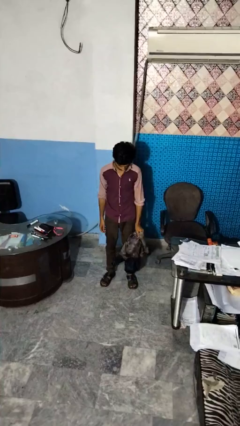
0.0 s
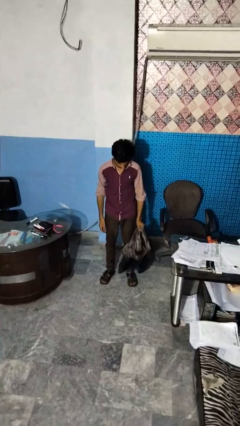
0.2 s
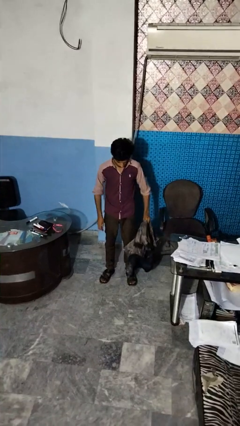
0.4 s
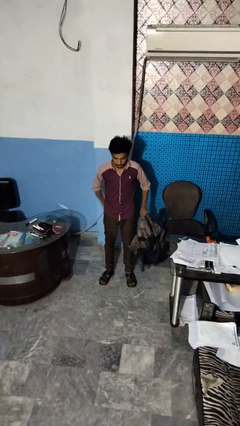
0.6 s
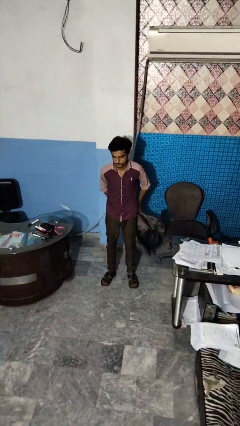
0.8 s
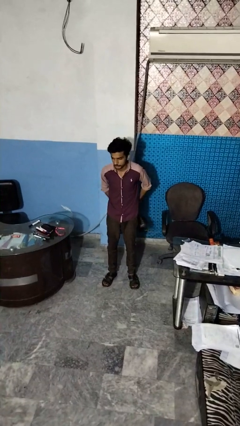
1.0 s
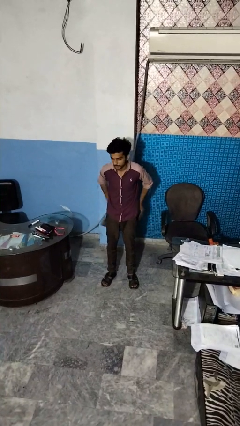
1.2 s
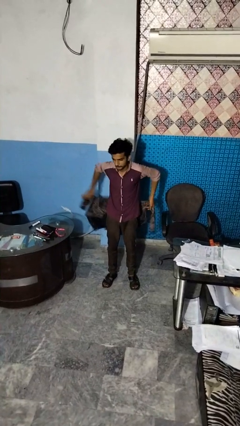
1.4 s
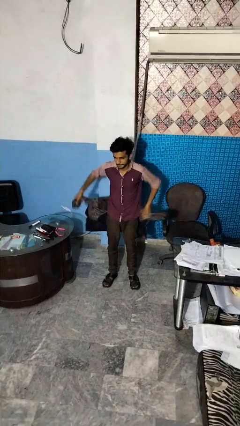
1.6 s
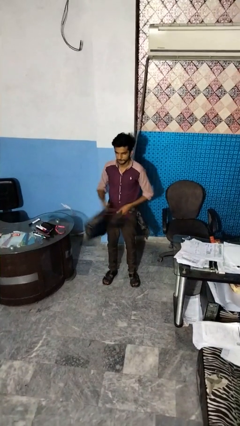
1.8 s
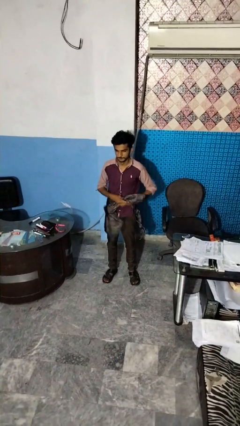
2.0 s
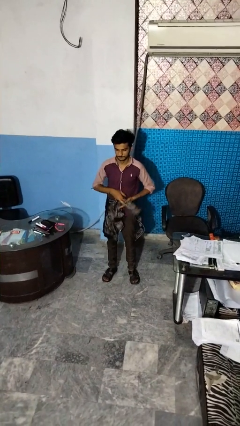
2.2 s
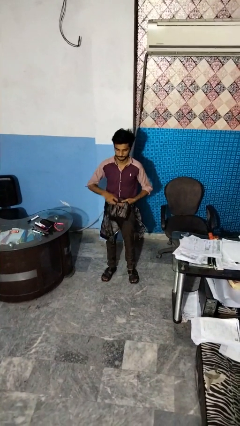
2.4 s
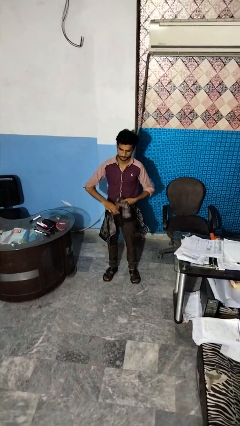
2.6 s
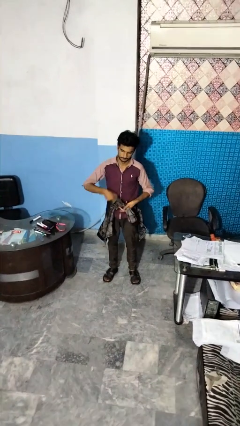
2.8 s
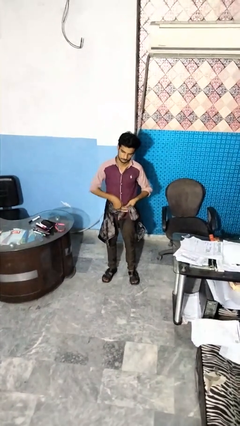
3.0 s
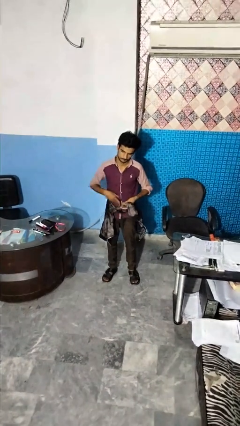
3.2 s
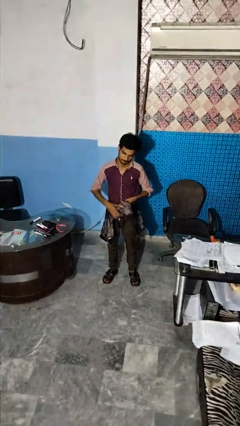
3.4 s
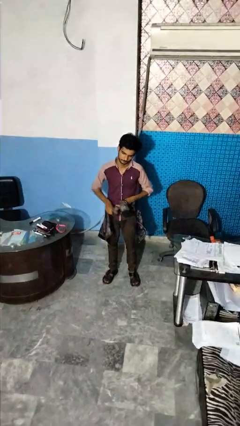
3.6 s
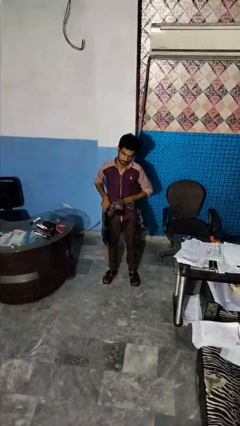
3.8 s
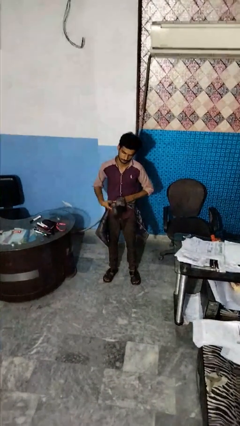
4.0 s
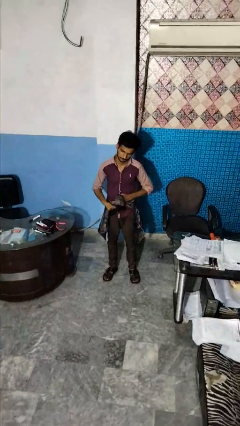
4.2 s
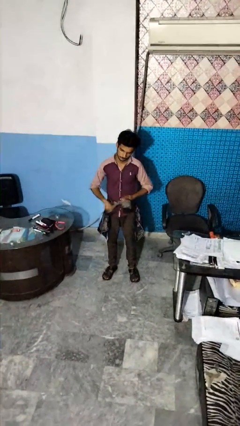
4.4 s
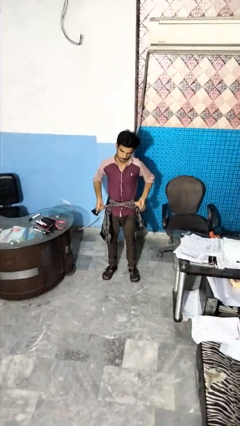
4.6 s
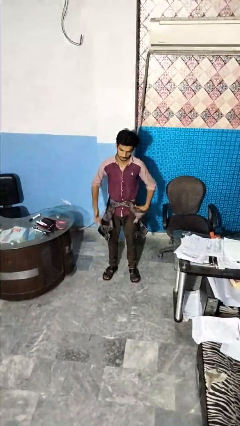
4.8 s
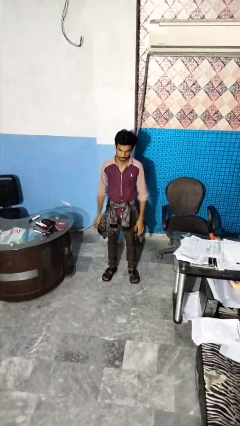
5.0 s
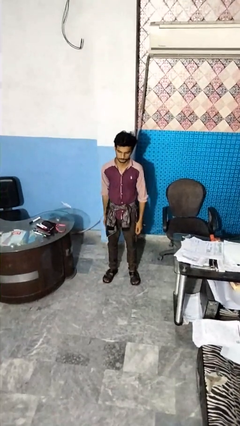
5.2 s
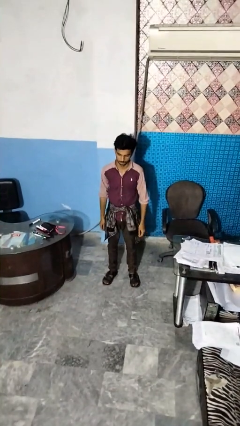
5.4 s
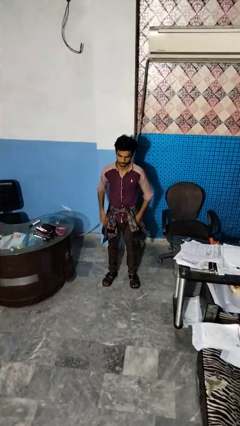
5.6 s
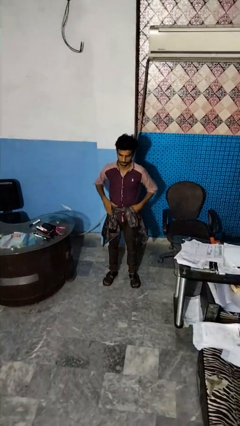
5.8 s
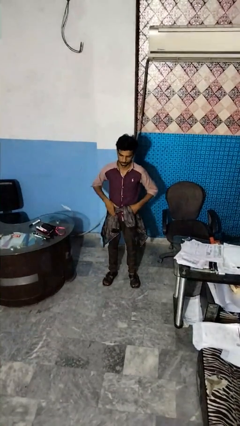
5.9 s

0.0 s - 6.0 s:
person ties jacket around waist

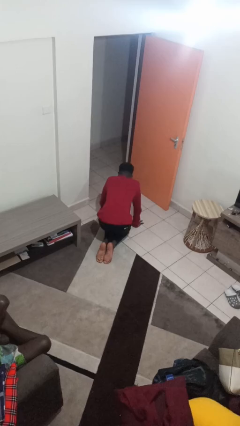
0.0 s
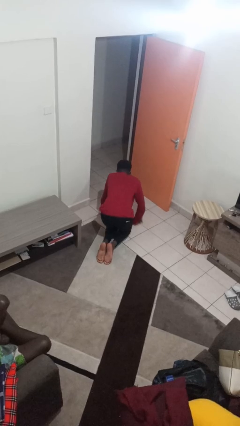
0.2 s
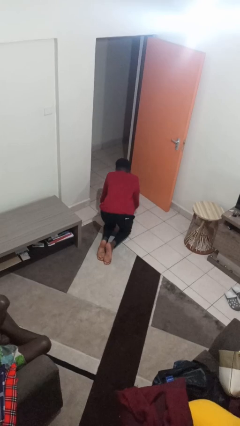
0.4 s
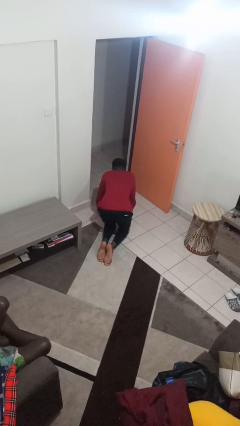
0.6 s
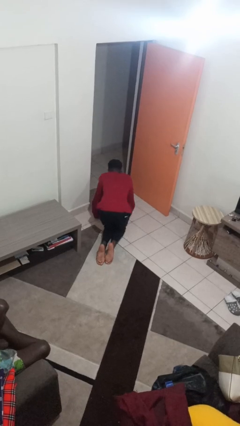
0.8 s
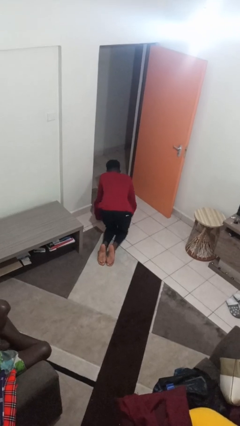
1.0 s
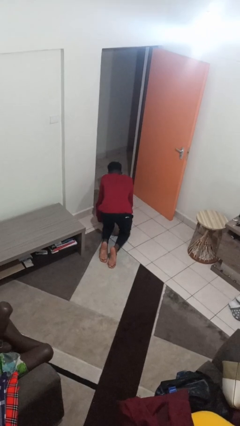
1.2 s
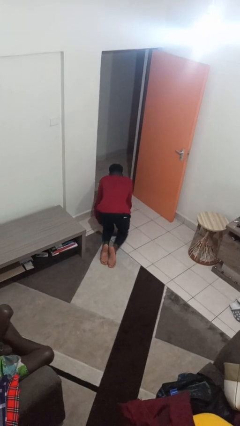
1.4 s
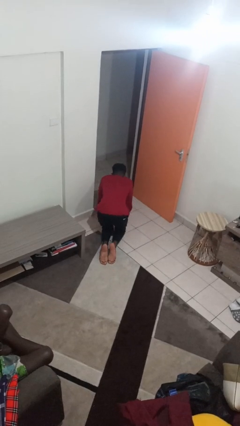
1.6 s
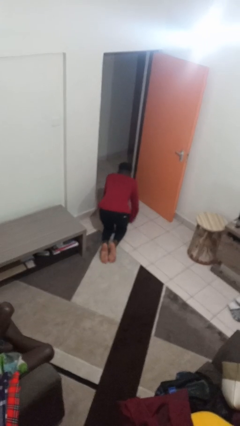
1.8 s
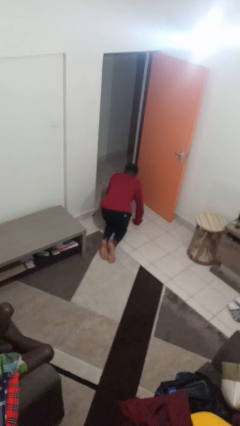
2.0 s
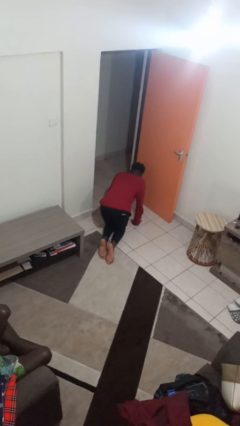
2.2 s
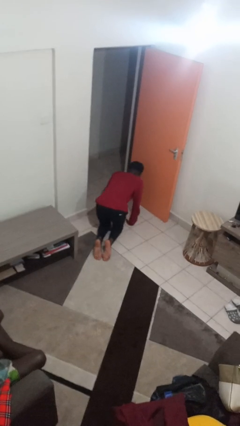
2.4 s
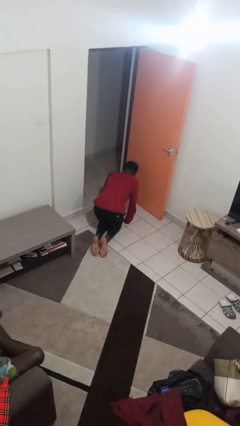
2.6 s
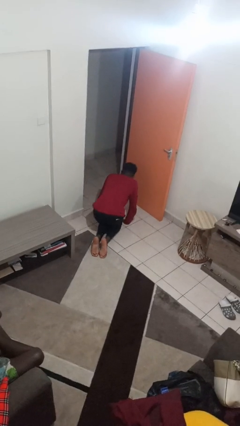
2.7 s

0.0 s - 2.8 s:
person crawls

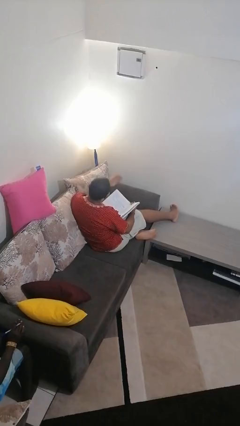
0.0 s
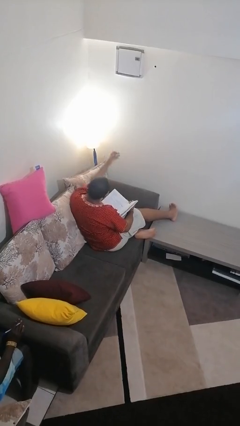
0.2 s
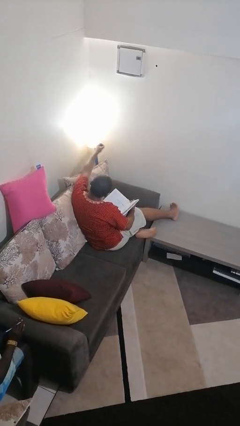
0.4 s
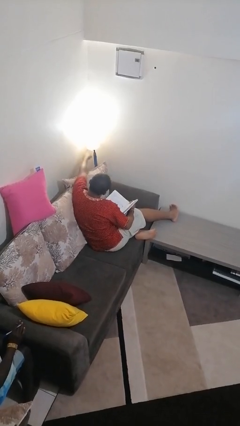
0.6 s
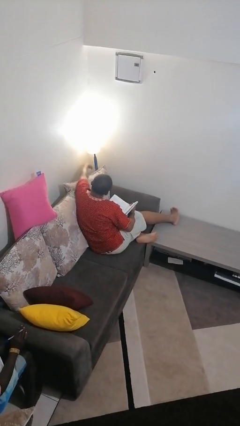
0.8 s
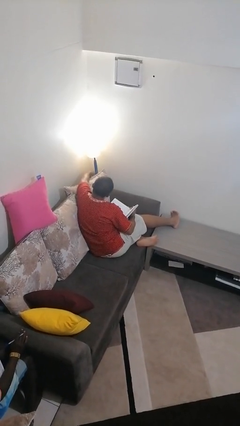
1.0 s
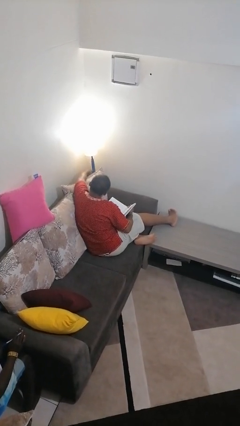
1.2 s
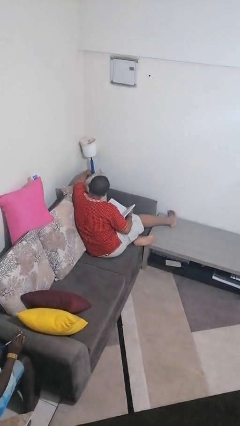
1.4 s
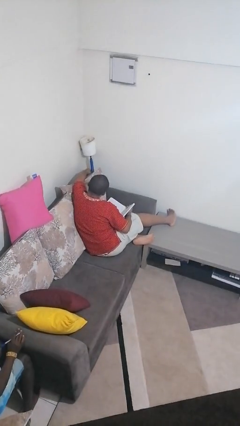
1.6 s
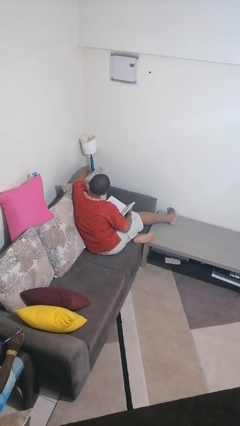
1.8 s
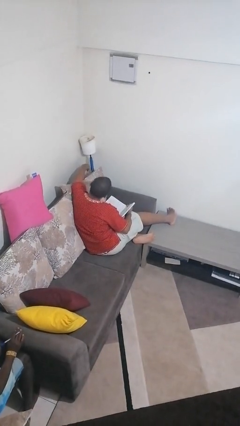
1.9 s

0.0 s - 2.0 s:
person turns off lamp

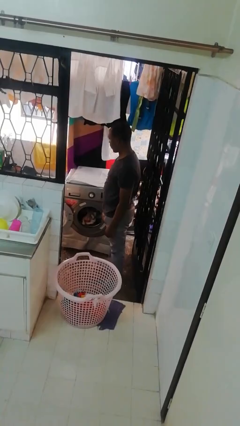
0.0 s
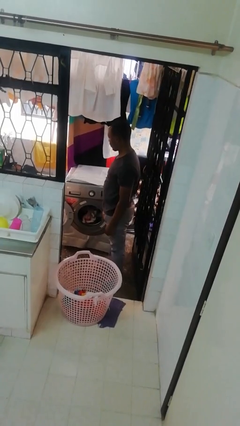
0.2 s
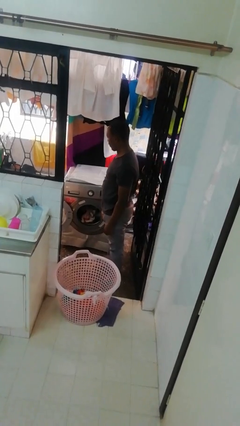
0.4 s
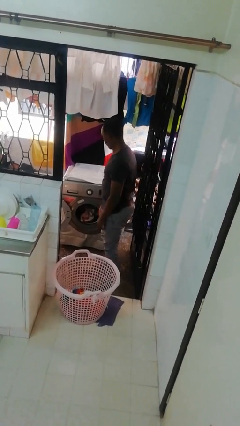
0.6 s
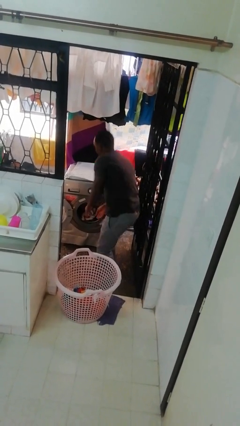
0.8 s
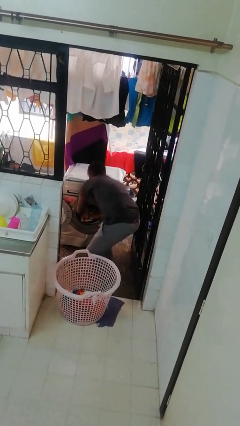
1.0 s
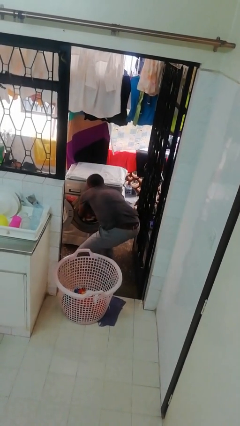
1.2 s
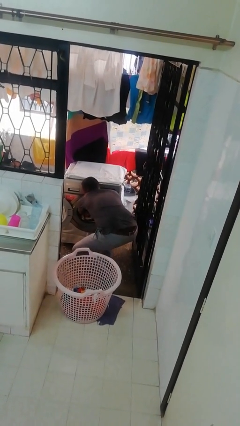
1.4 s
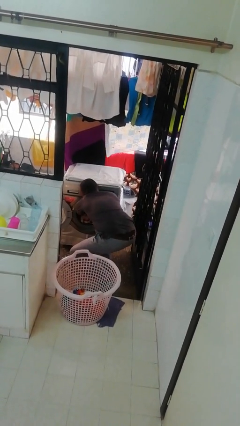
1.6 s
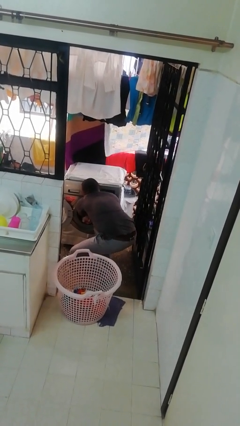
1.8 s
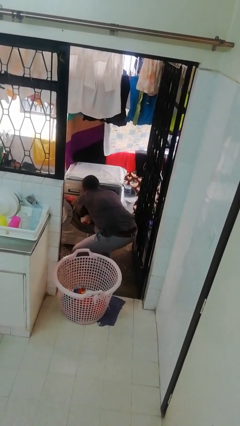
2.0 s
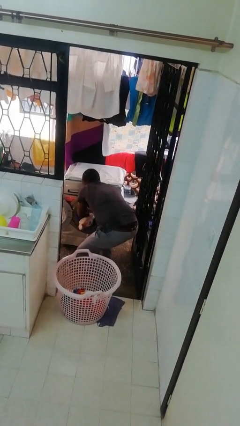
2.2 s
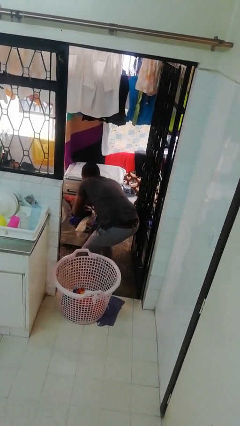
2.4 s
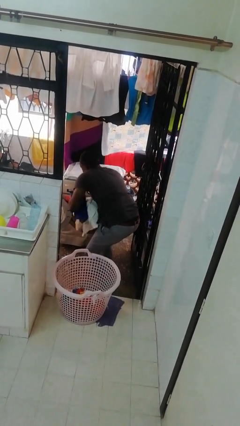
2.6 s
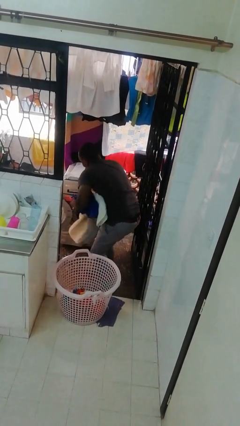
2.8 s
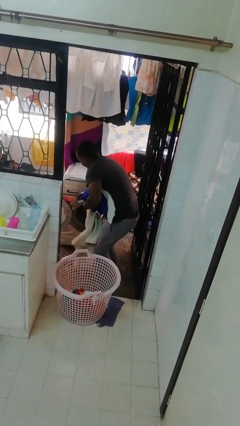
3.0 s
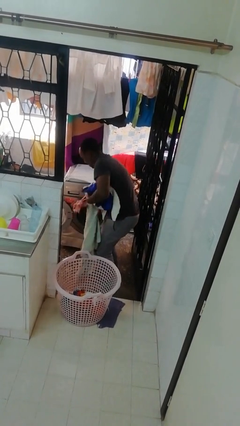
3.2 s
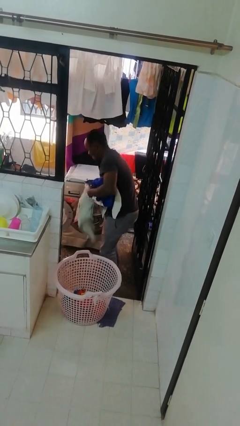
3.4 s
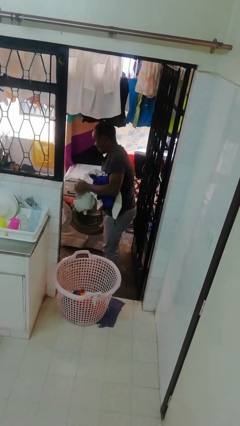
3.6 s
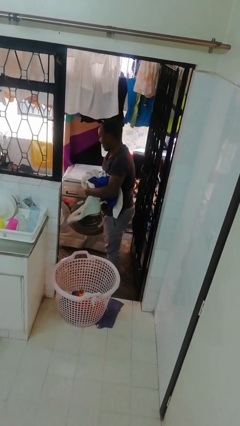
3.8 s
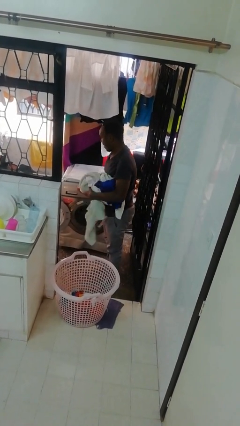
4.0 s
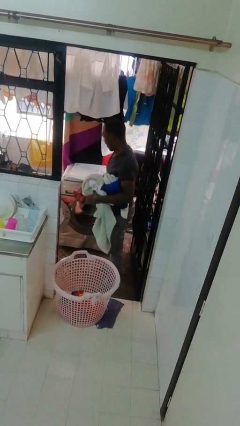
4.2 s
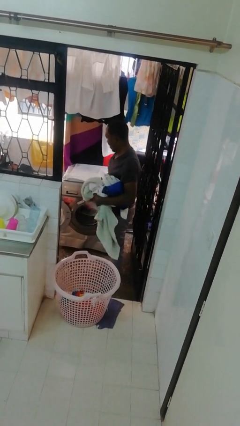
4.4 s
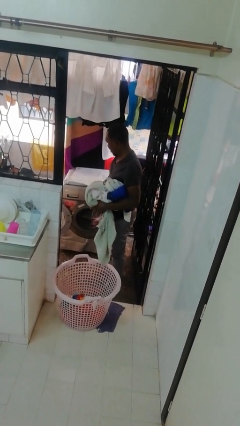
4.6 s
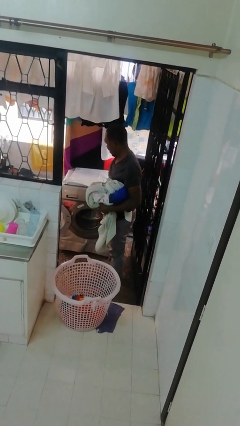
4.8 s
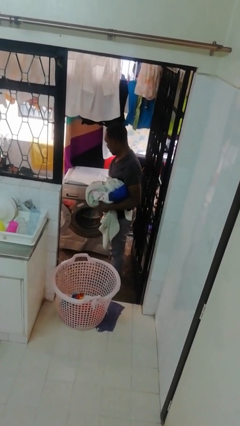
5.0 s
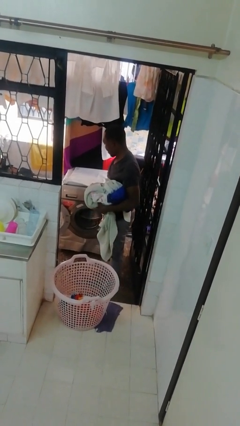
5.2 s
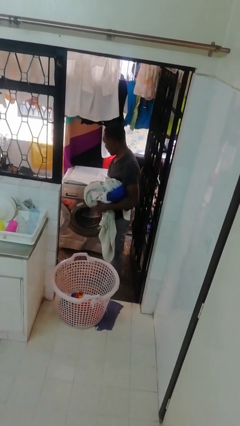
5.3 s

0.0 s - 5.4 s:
person unloads clotheswasher

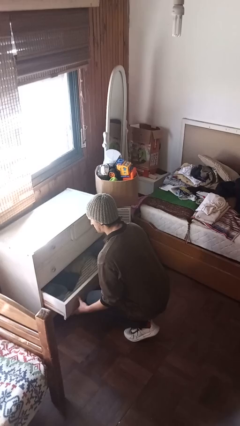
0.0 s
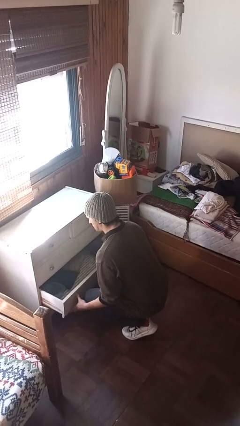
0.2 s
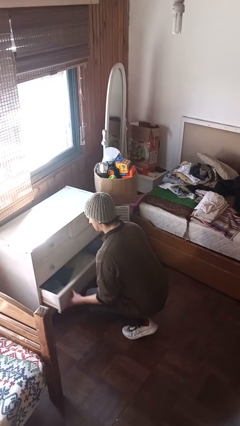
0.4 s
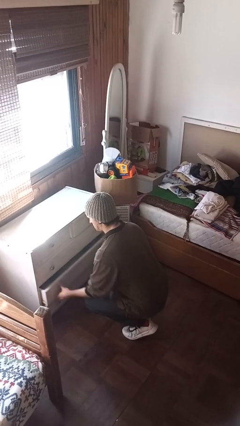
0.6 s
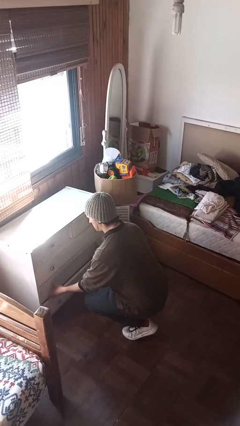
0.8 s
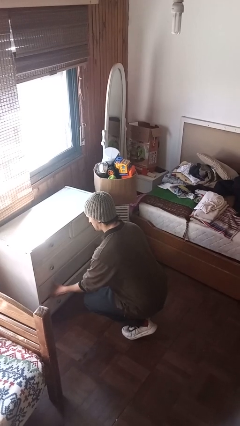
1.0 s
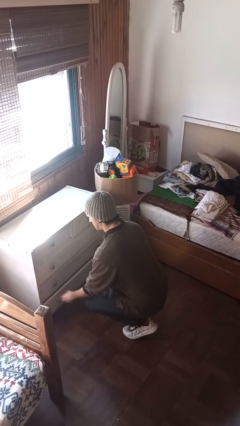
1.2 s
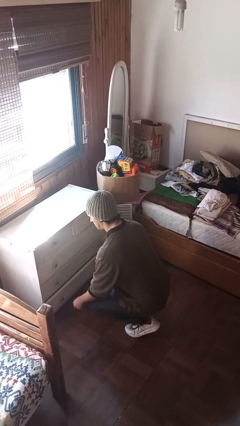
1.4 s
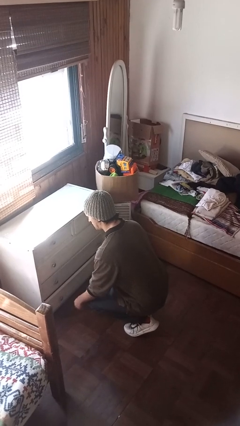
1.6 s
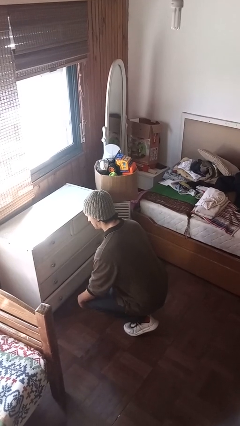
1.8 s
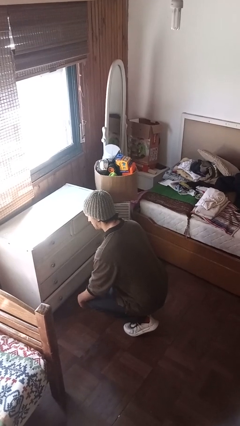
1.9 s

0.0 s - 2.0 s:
person closes dresser drawer
